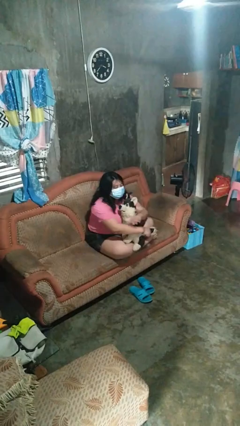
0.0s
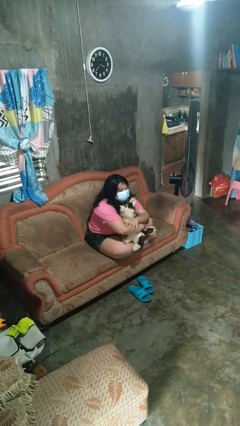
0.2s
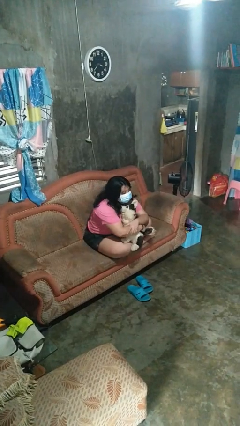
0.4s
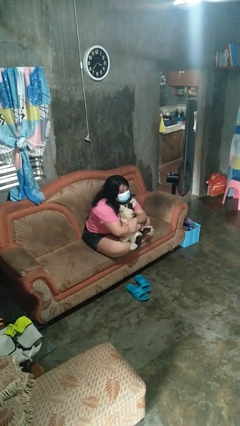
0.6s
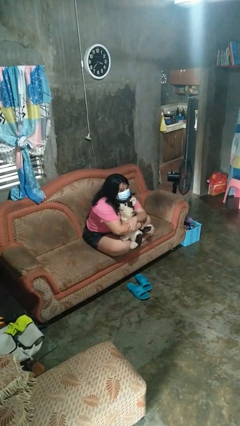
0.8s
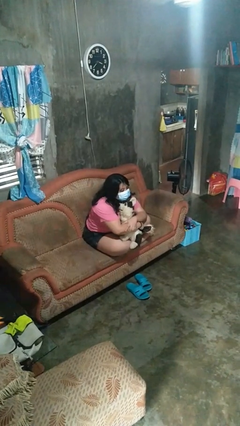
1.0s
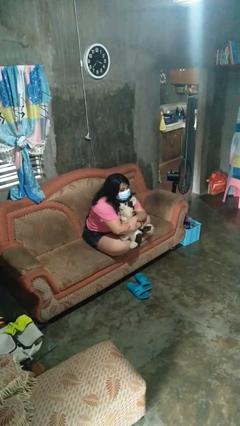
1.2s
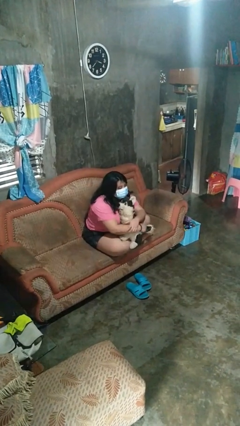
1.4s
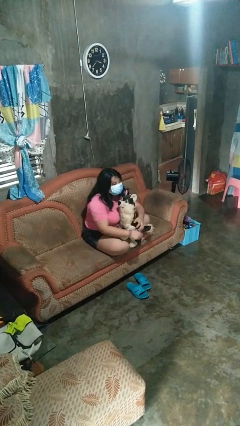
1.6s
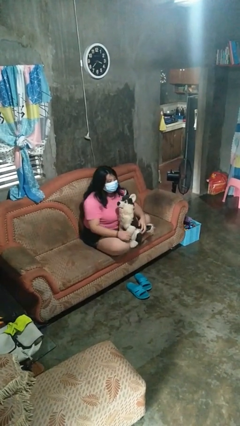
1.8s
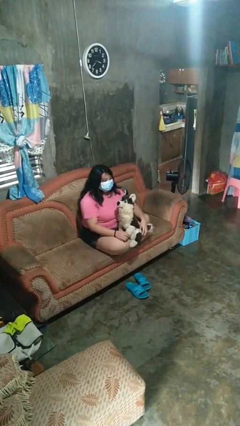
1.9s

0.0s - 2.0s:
person hugs stuffed animal

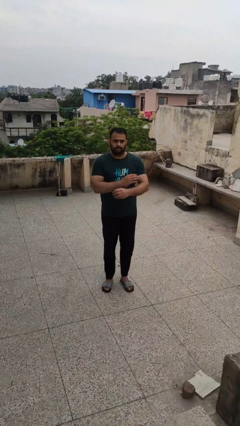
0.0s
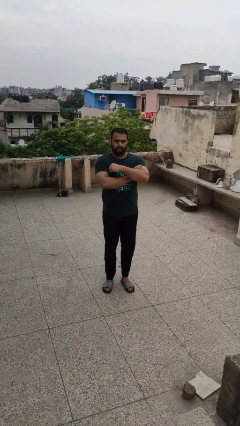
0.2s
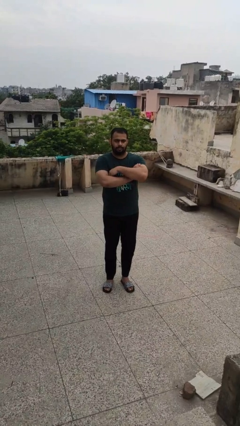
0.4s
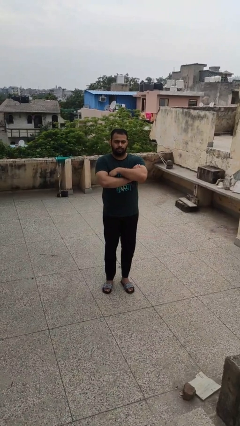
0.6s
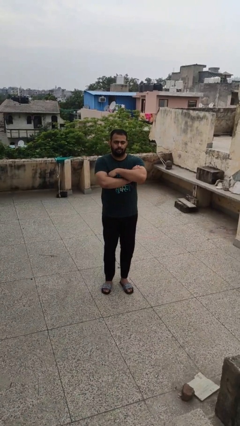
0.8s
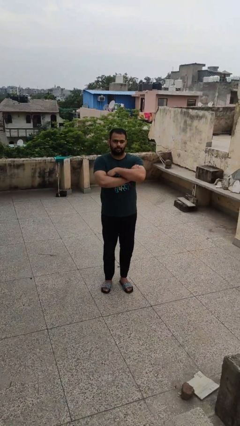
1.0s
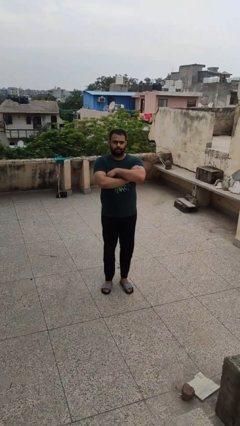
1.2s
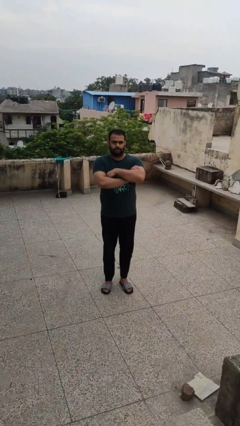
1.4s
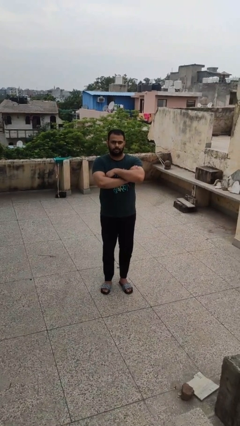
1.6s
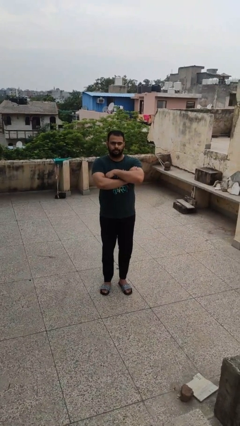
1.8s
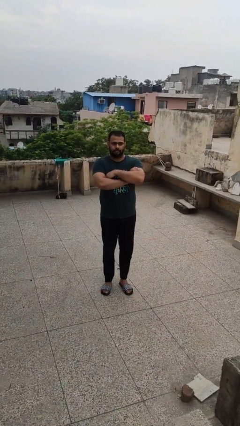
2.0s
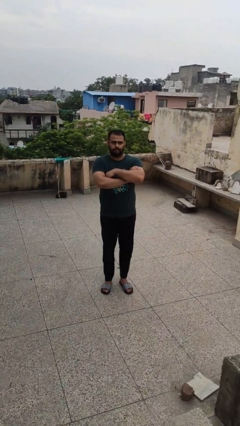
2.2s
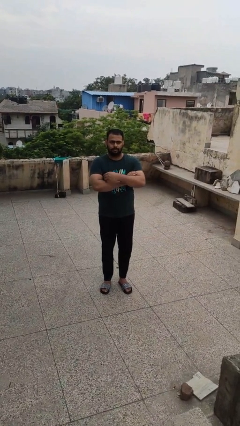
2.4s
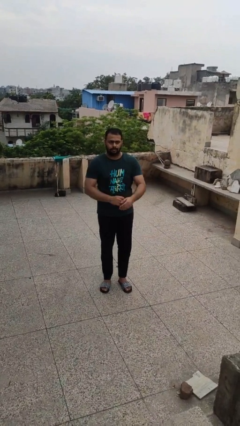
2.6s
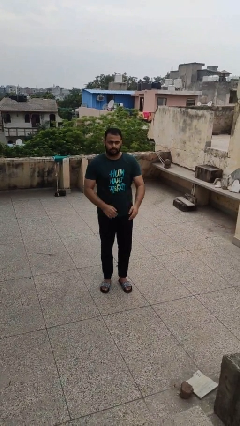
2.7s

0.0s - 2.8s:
person crosses arms

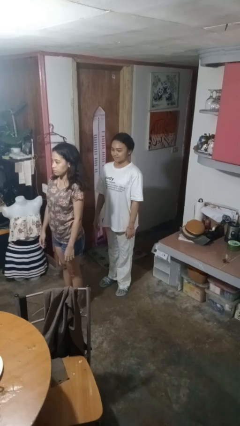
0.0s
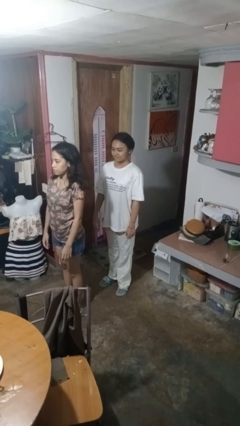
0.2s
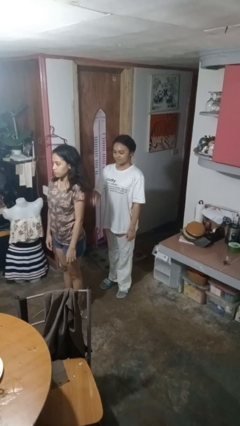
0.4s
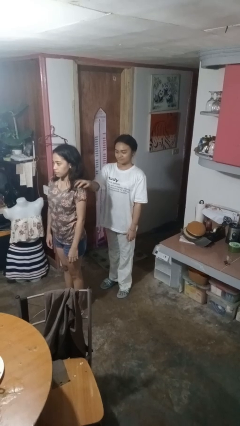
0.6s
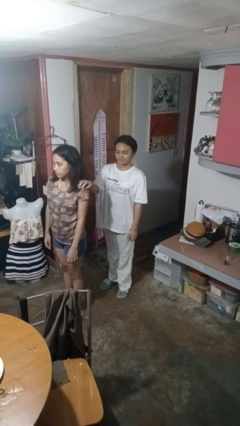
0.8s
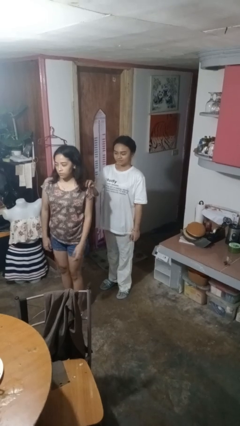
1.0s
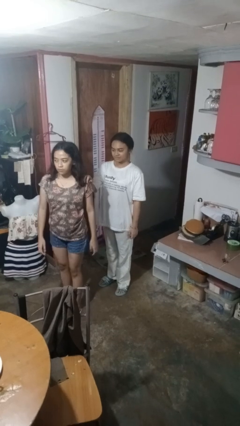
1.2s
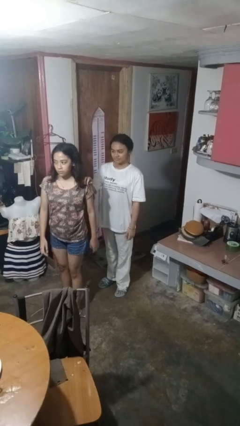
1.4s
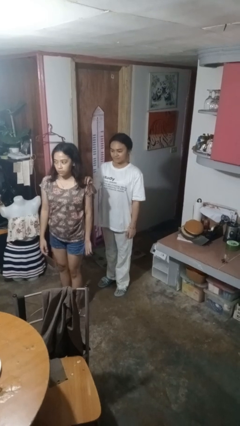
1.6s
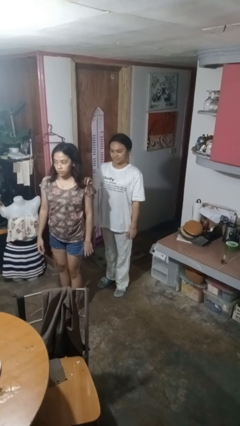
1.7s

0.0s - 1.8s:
person grabs person by shoulder

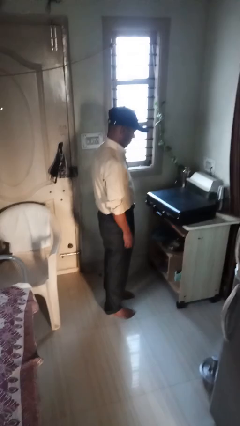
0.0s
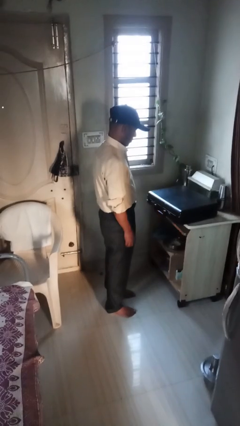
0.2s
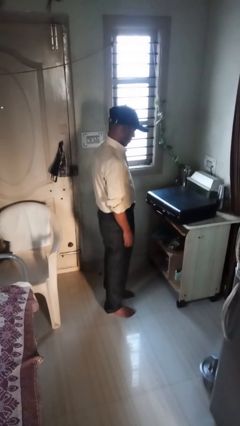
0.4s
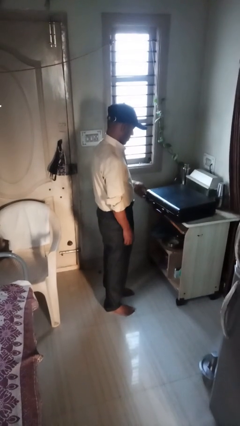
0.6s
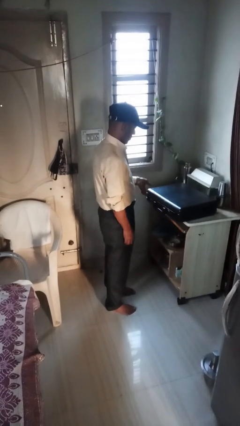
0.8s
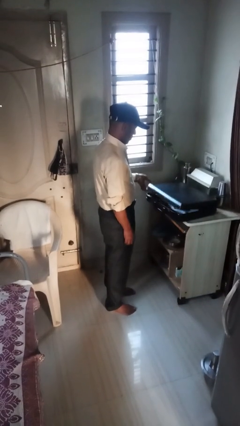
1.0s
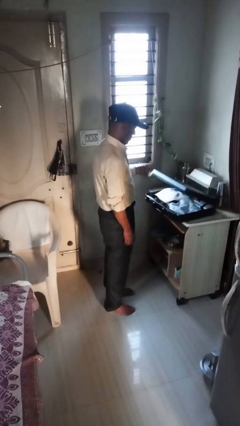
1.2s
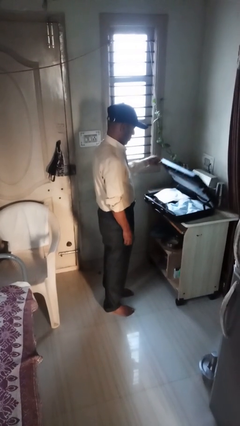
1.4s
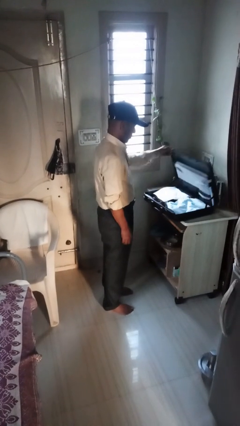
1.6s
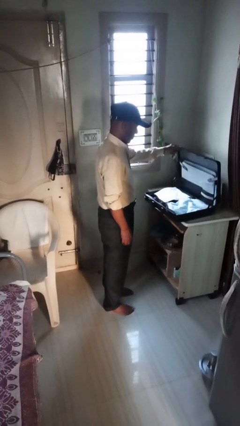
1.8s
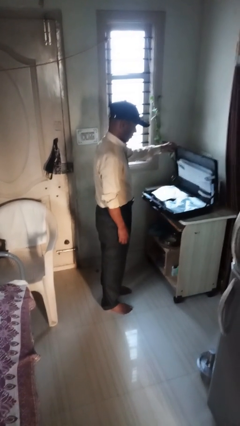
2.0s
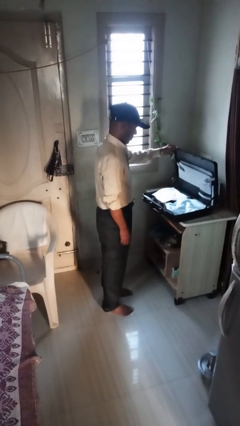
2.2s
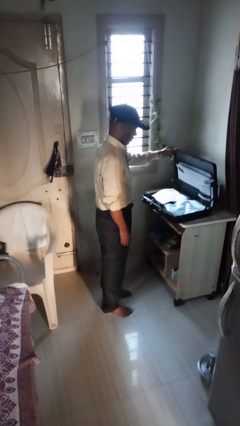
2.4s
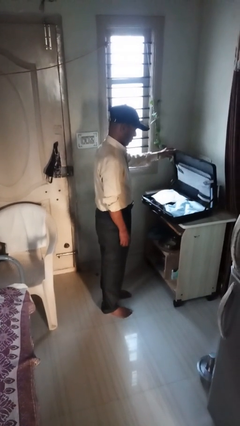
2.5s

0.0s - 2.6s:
person opens suitcase

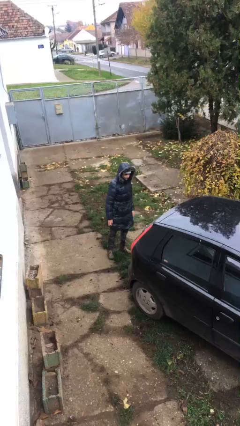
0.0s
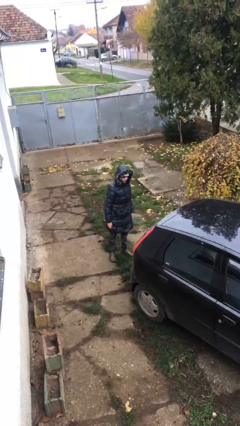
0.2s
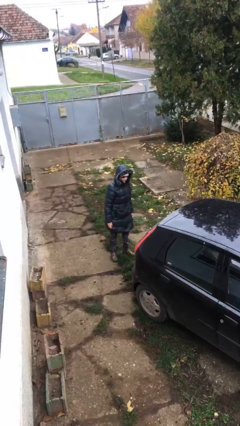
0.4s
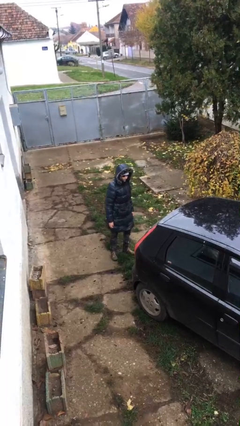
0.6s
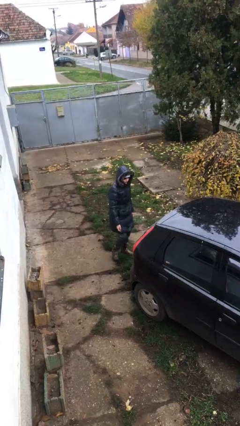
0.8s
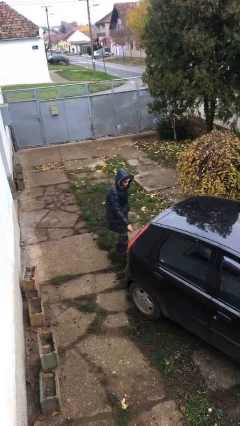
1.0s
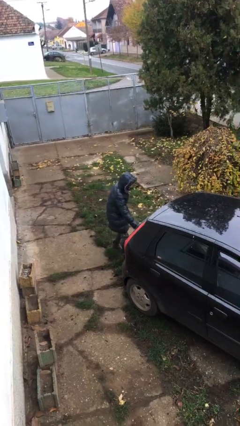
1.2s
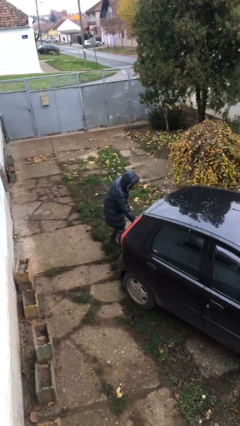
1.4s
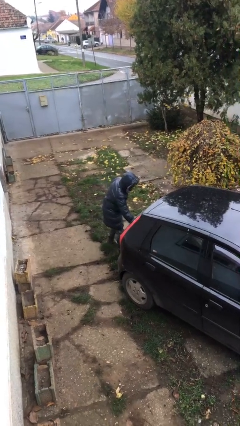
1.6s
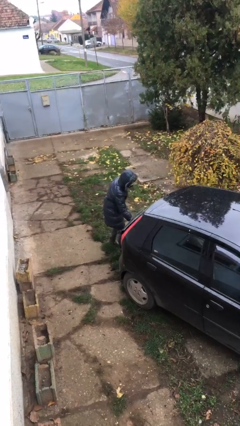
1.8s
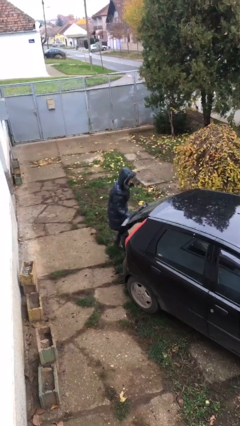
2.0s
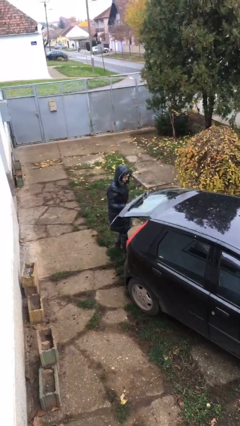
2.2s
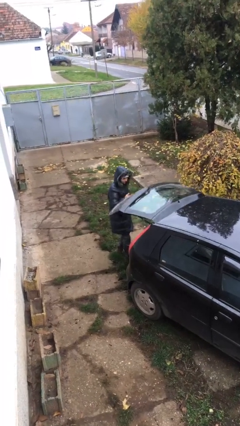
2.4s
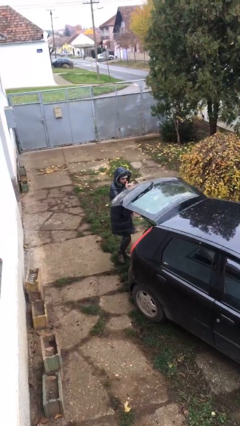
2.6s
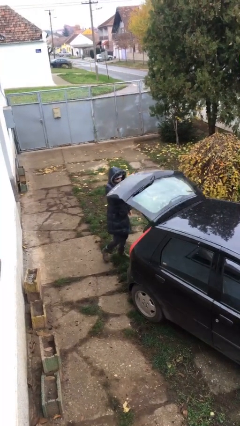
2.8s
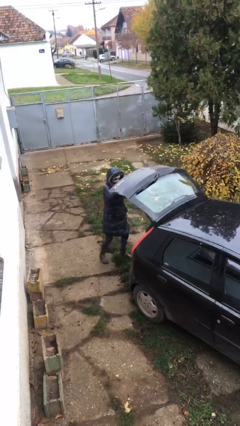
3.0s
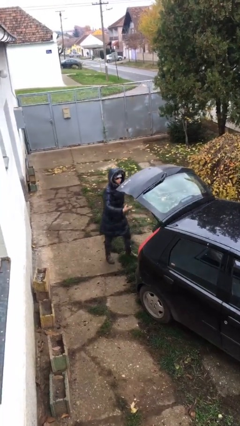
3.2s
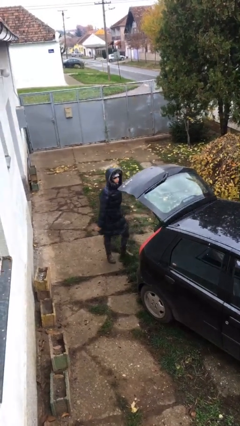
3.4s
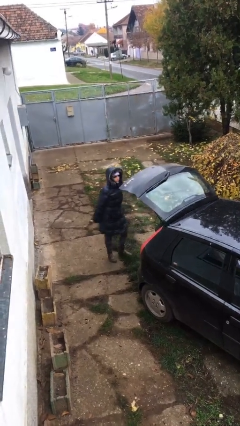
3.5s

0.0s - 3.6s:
person opens car trunk

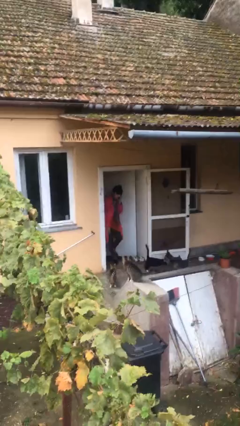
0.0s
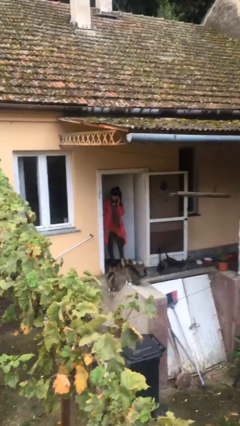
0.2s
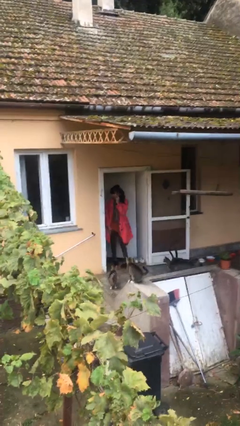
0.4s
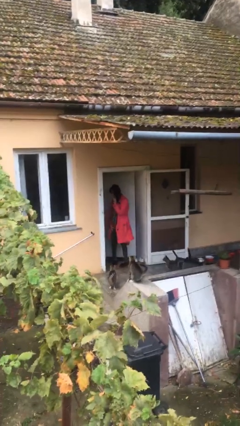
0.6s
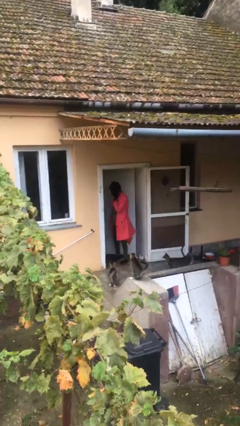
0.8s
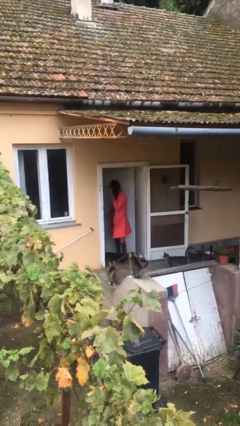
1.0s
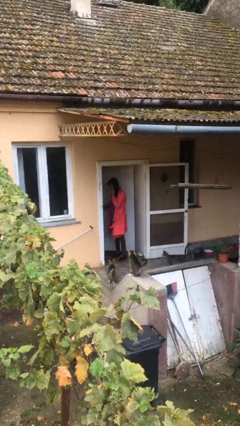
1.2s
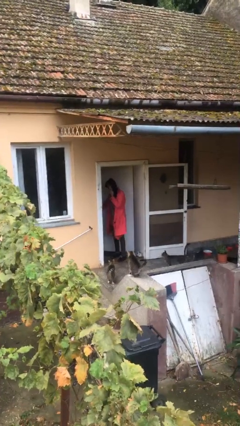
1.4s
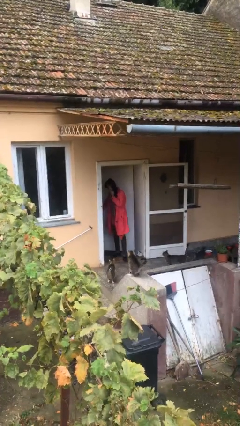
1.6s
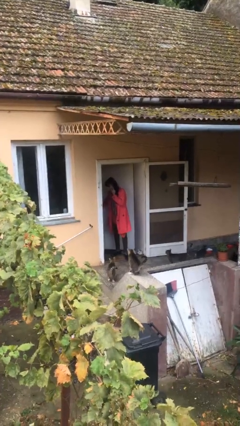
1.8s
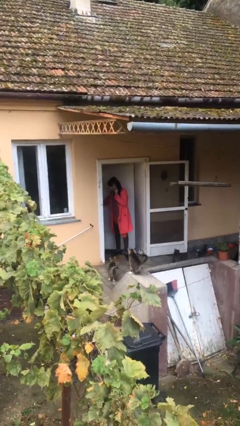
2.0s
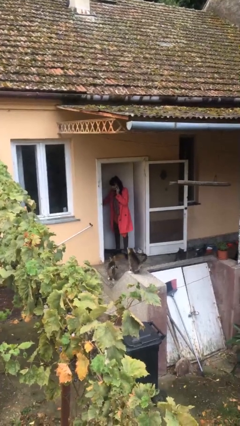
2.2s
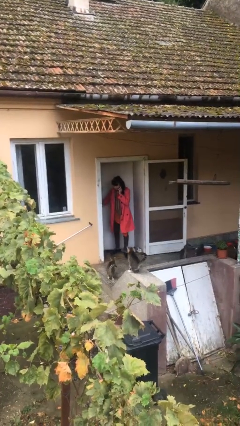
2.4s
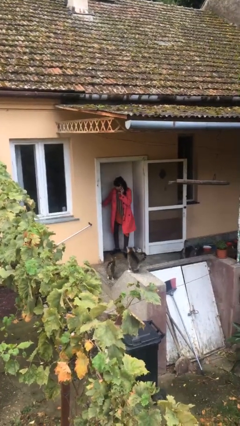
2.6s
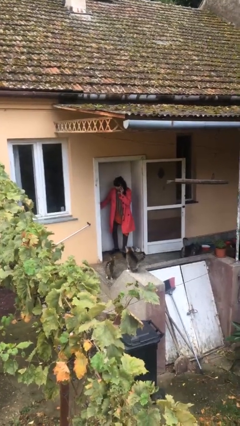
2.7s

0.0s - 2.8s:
person enters scene through structure

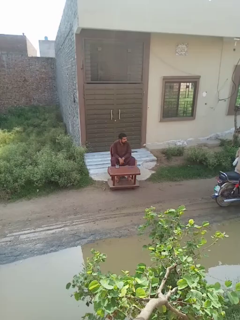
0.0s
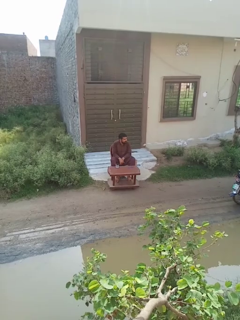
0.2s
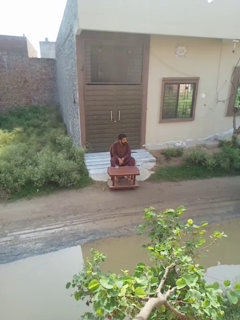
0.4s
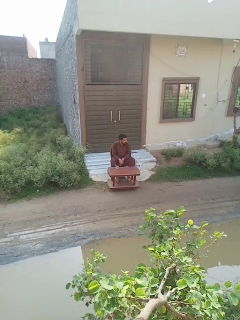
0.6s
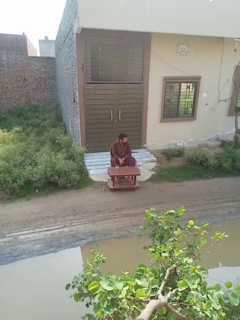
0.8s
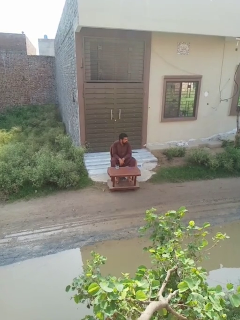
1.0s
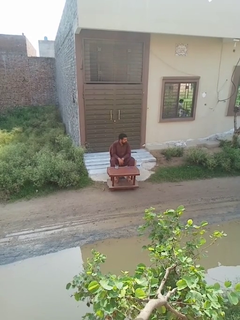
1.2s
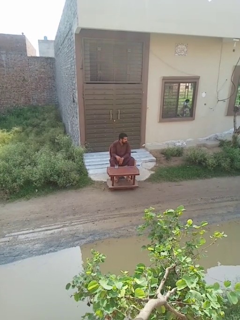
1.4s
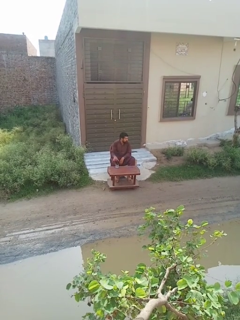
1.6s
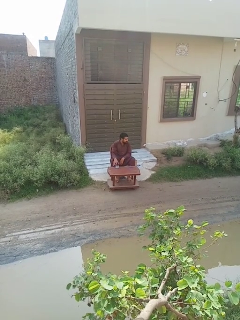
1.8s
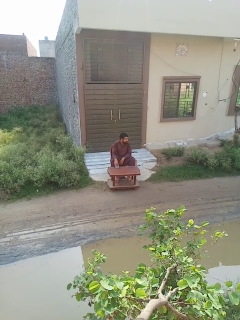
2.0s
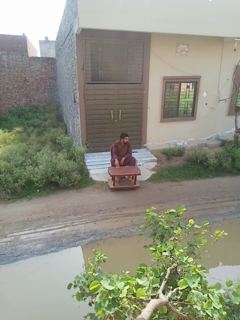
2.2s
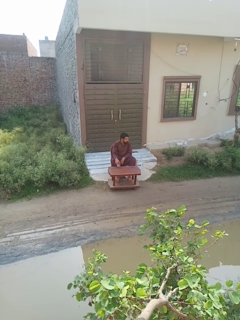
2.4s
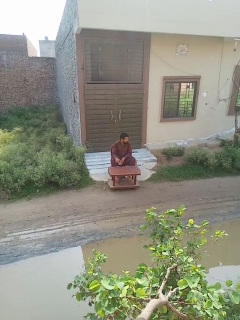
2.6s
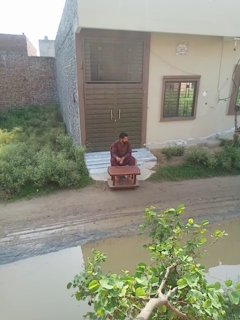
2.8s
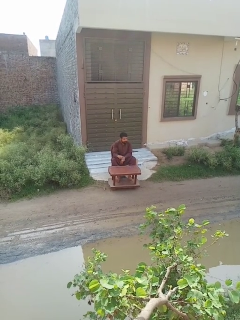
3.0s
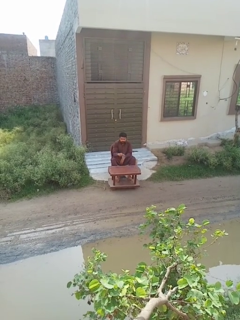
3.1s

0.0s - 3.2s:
person picks up object from table
